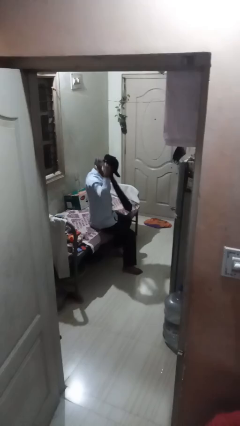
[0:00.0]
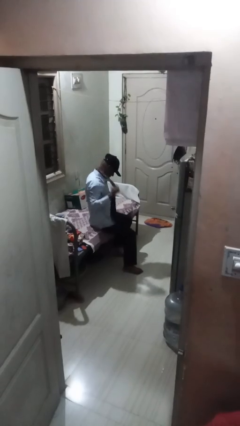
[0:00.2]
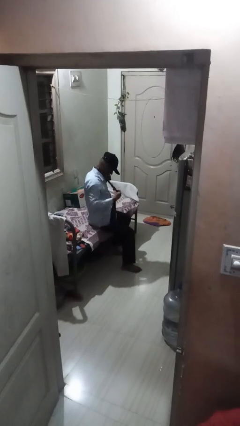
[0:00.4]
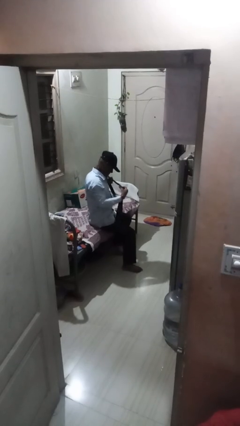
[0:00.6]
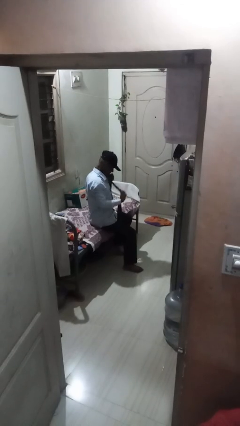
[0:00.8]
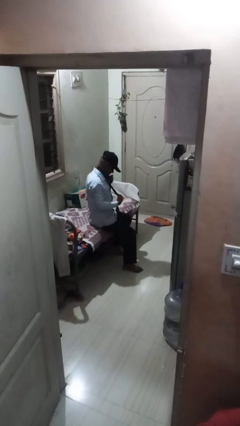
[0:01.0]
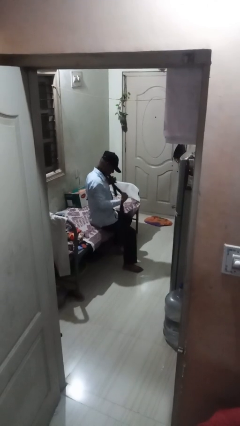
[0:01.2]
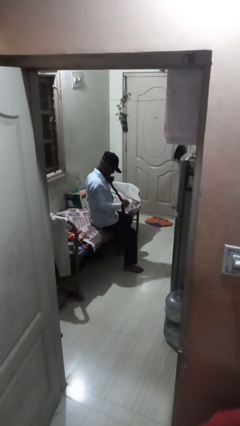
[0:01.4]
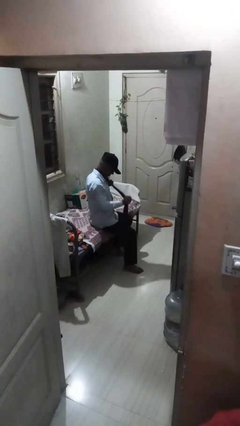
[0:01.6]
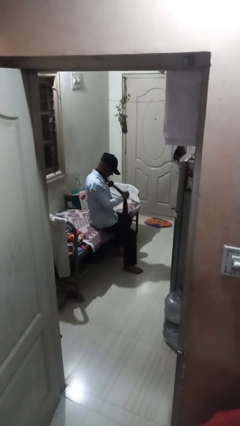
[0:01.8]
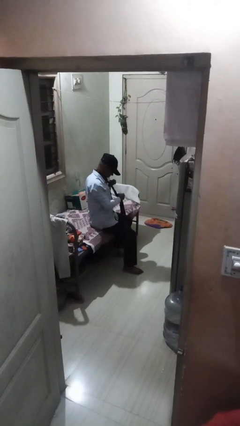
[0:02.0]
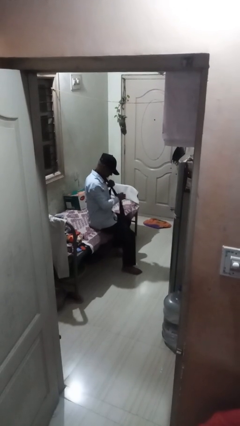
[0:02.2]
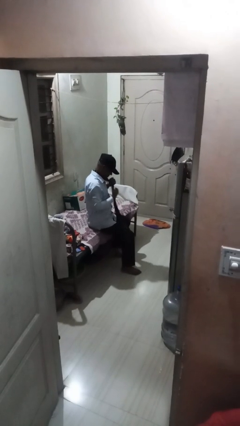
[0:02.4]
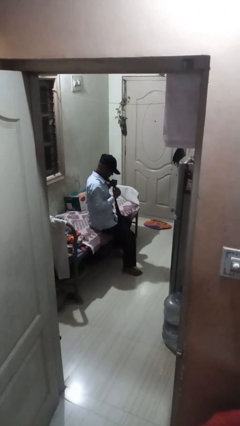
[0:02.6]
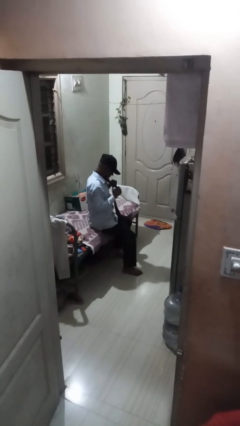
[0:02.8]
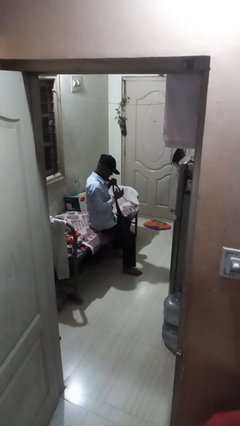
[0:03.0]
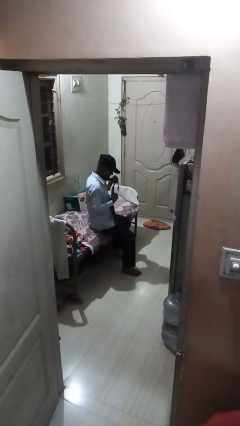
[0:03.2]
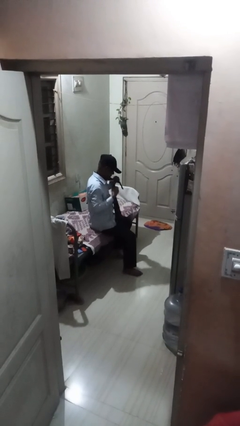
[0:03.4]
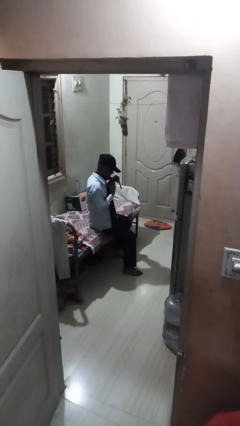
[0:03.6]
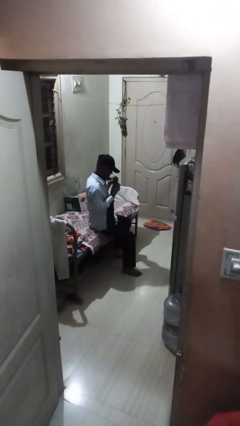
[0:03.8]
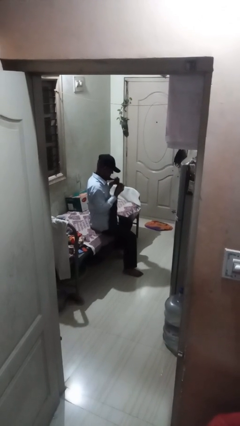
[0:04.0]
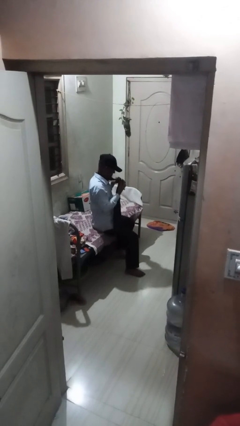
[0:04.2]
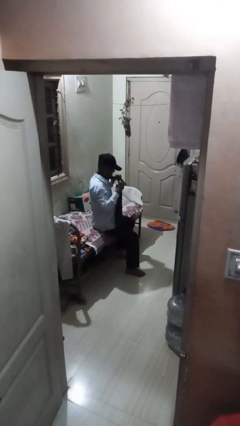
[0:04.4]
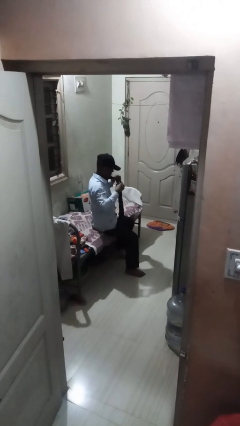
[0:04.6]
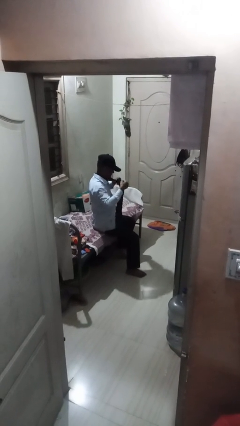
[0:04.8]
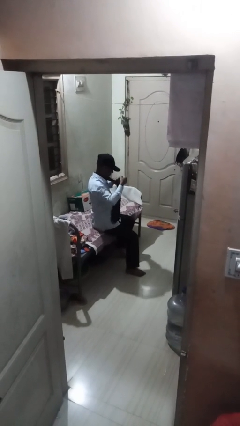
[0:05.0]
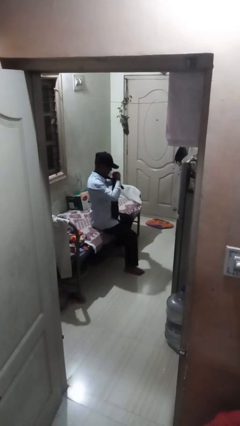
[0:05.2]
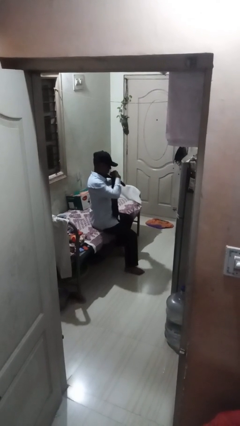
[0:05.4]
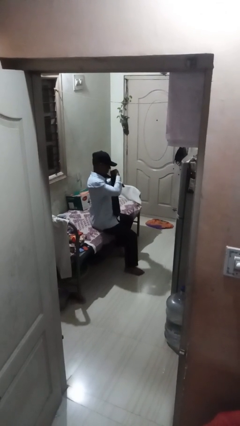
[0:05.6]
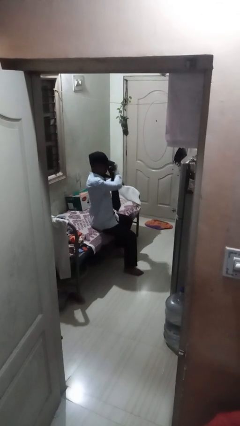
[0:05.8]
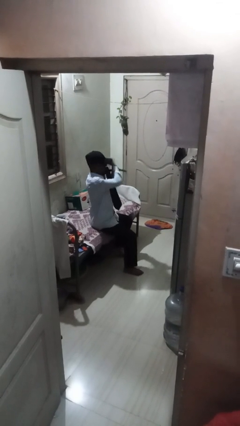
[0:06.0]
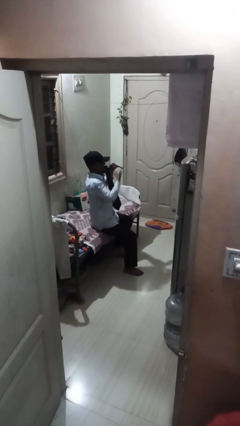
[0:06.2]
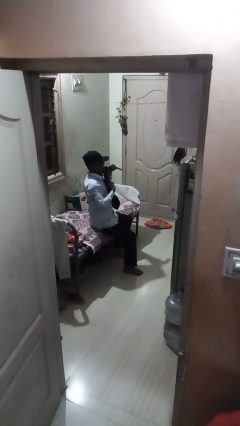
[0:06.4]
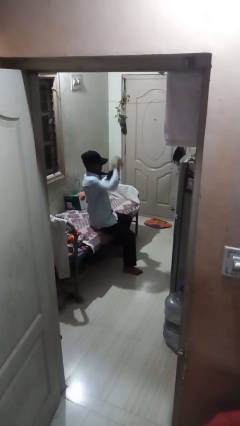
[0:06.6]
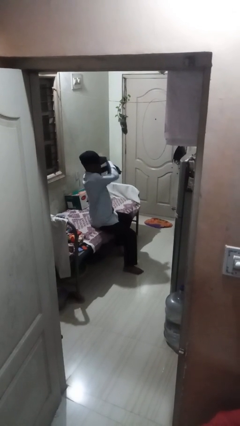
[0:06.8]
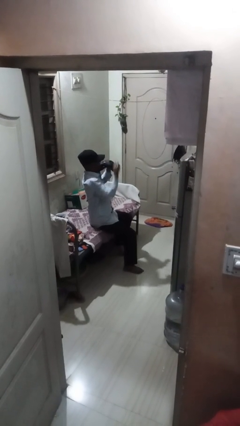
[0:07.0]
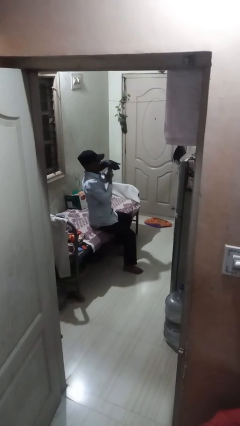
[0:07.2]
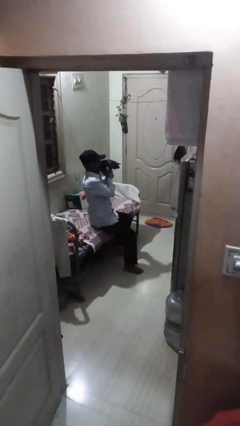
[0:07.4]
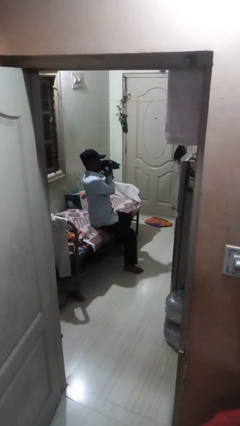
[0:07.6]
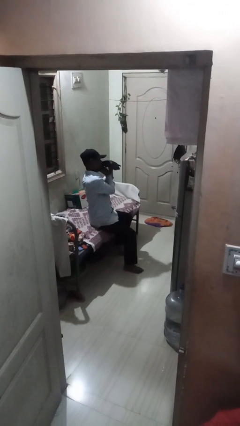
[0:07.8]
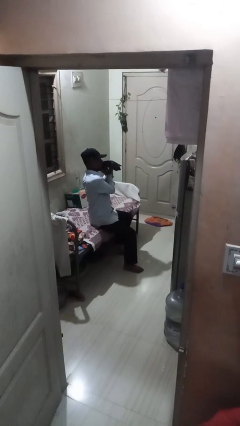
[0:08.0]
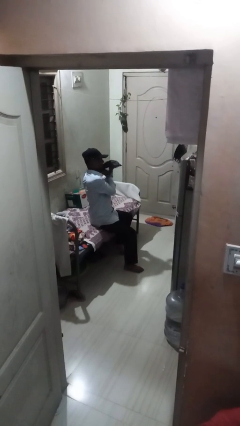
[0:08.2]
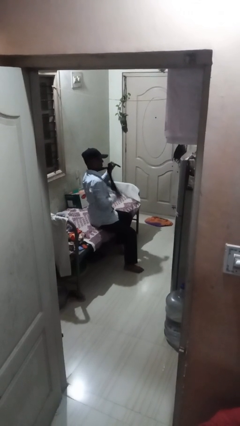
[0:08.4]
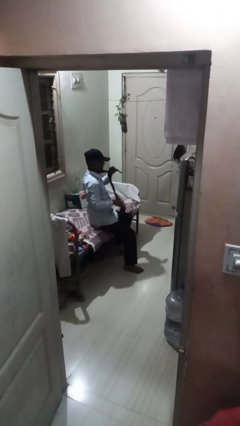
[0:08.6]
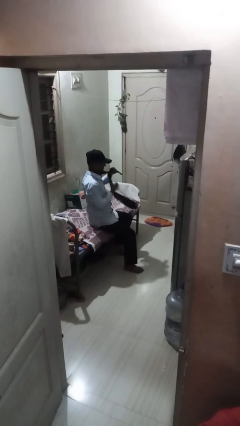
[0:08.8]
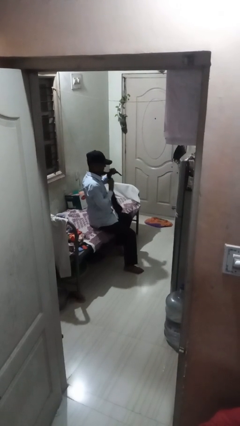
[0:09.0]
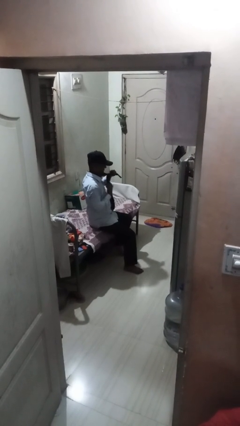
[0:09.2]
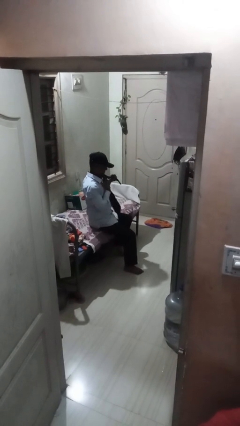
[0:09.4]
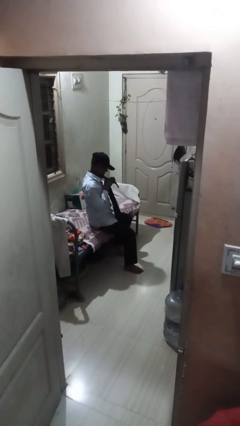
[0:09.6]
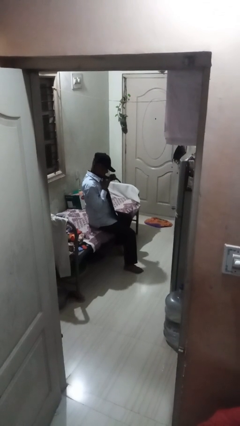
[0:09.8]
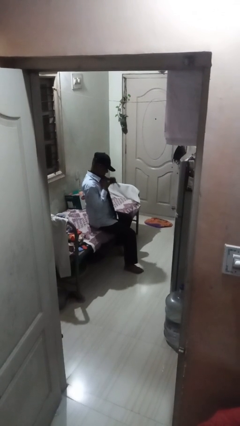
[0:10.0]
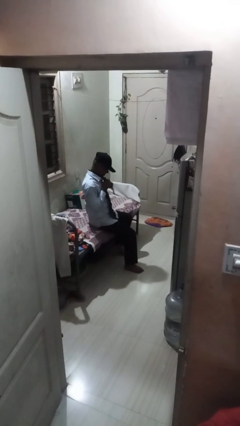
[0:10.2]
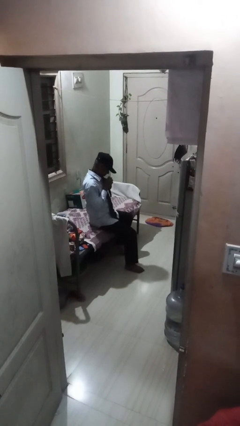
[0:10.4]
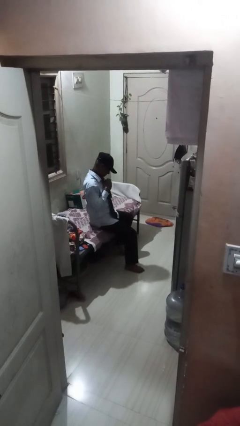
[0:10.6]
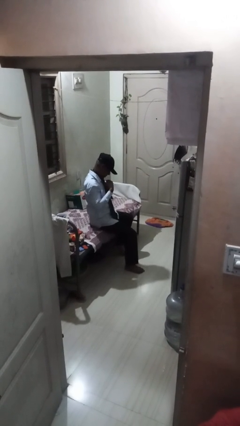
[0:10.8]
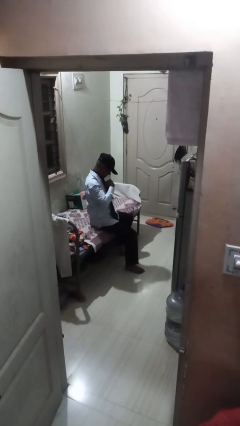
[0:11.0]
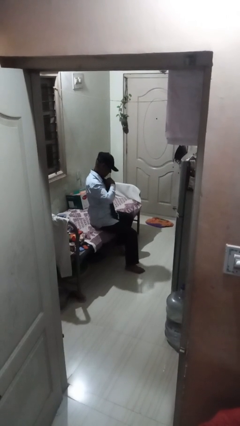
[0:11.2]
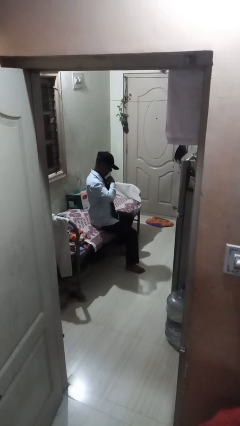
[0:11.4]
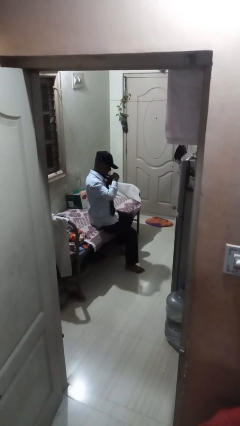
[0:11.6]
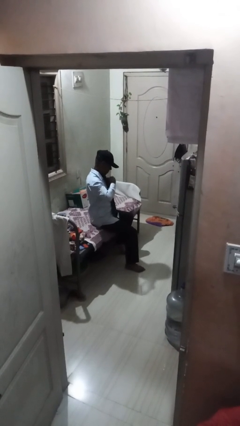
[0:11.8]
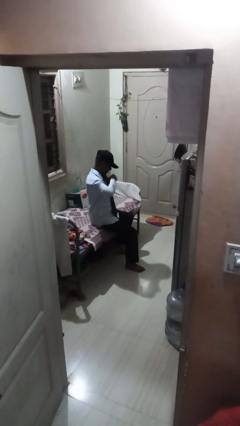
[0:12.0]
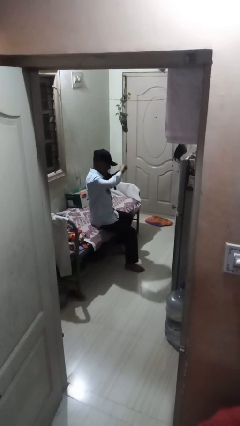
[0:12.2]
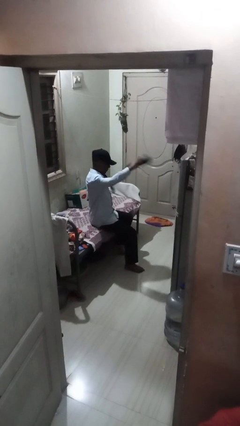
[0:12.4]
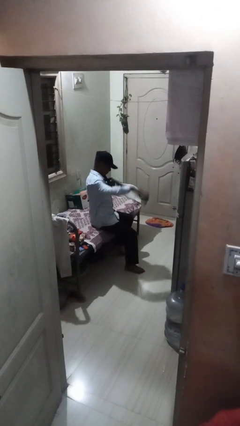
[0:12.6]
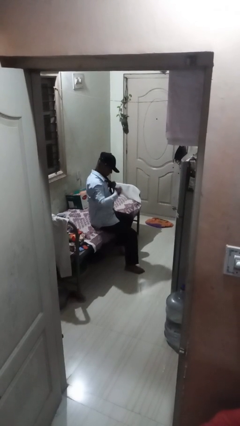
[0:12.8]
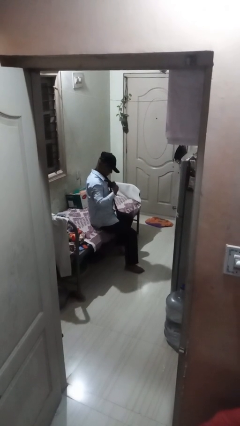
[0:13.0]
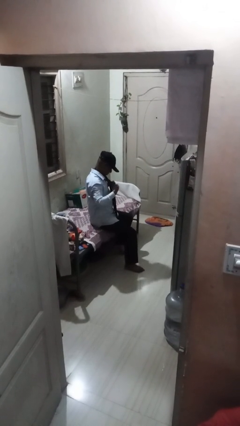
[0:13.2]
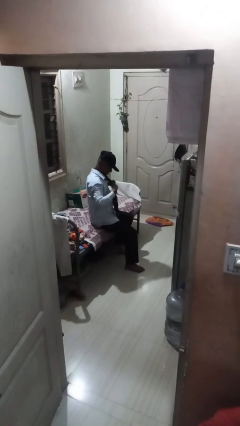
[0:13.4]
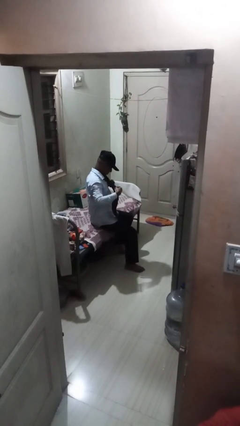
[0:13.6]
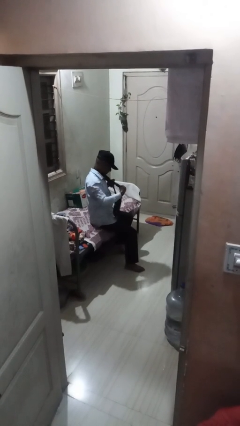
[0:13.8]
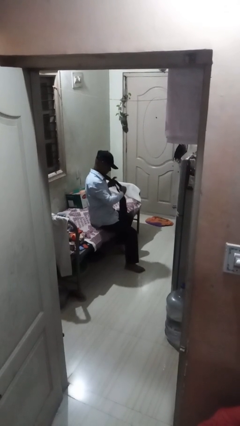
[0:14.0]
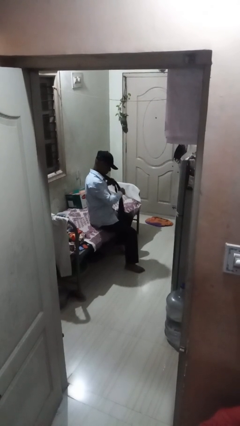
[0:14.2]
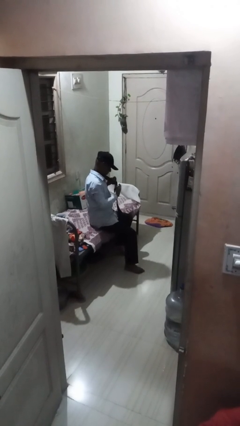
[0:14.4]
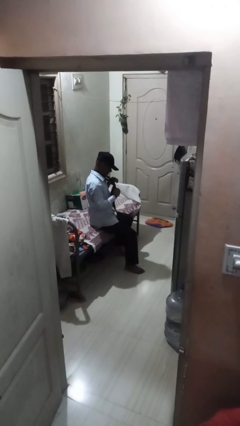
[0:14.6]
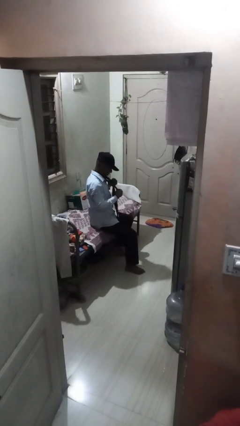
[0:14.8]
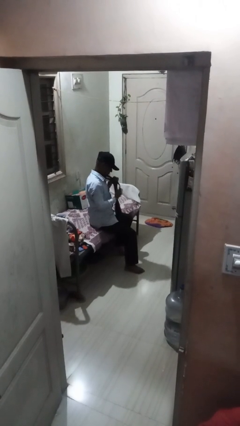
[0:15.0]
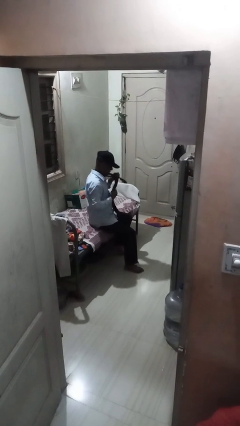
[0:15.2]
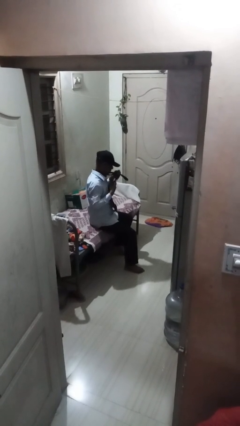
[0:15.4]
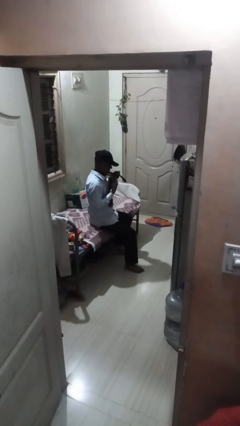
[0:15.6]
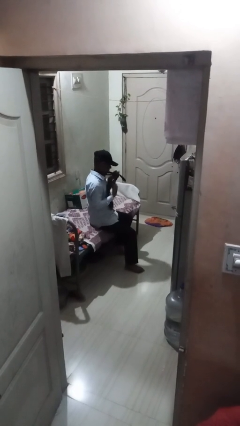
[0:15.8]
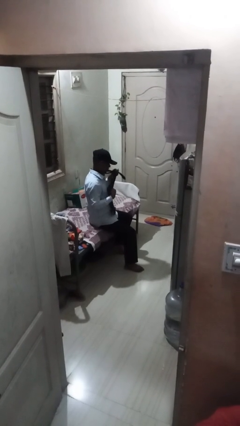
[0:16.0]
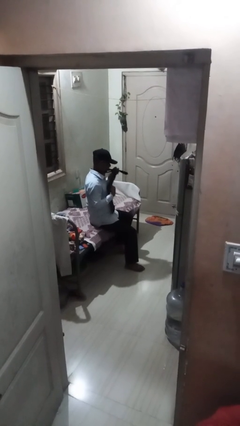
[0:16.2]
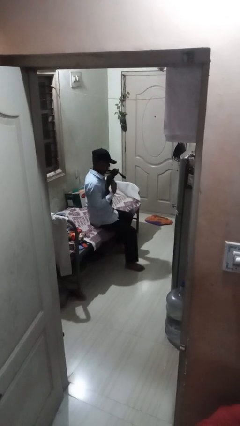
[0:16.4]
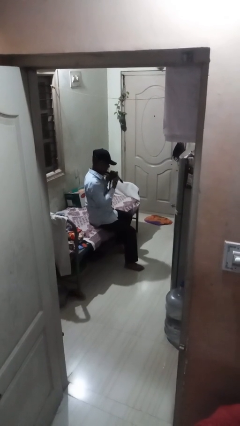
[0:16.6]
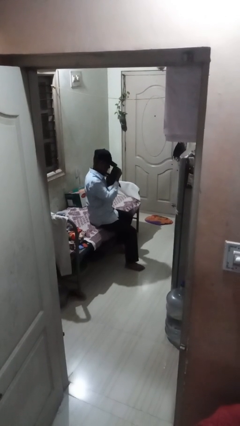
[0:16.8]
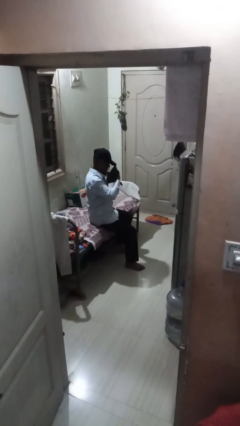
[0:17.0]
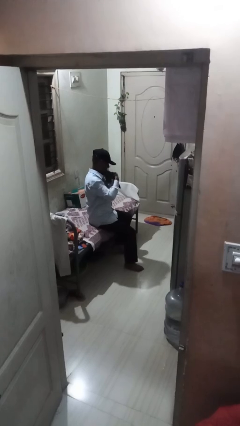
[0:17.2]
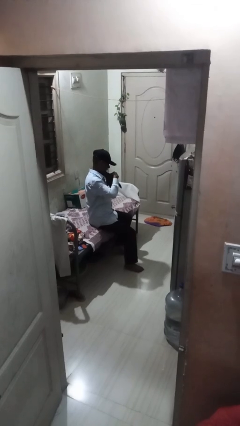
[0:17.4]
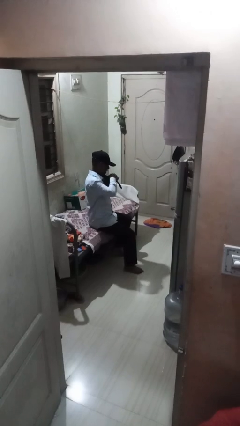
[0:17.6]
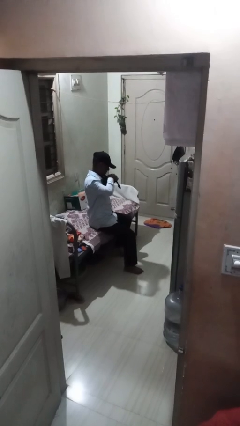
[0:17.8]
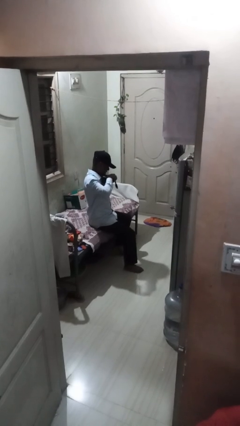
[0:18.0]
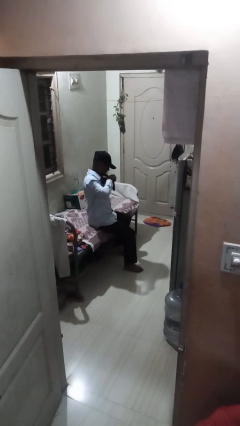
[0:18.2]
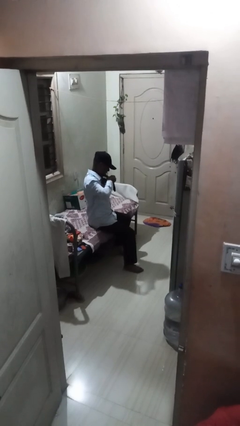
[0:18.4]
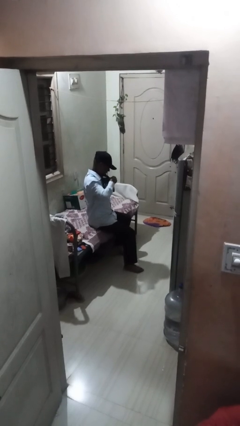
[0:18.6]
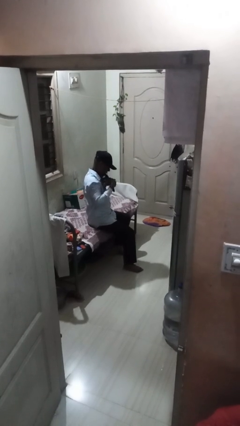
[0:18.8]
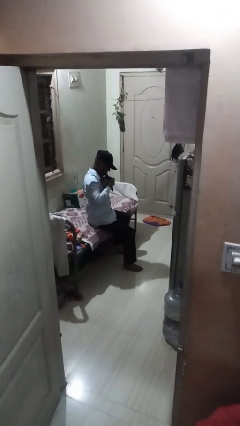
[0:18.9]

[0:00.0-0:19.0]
person puts on necktie
